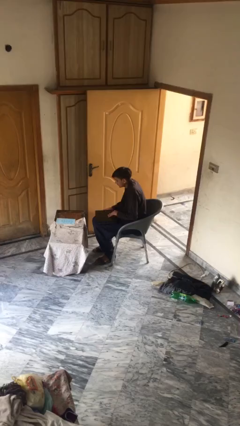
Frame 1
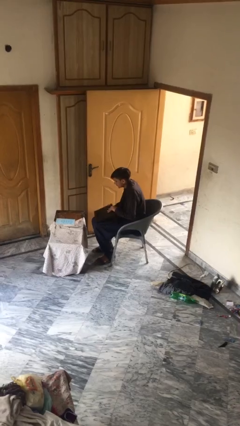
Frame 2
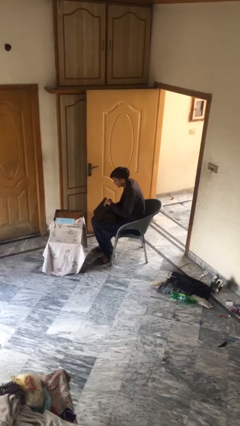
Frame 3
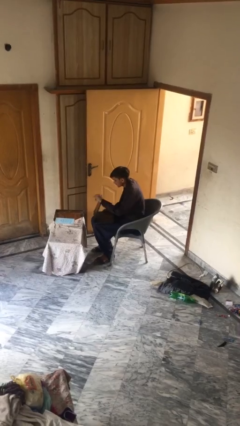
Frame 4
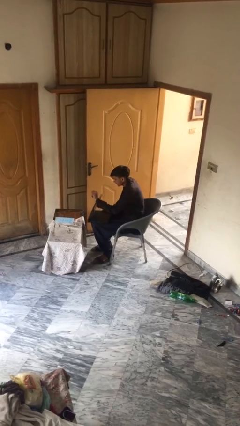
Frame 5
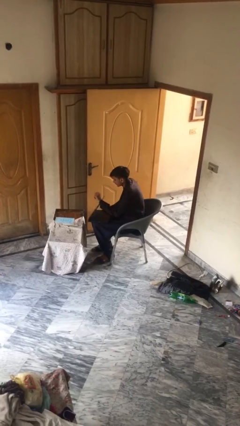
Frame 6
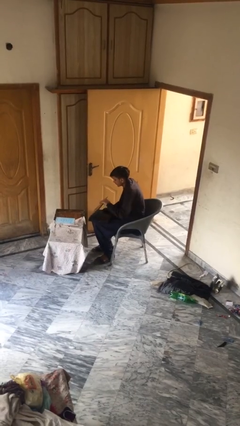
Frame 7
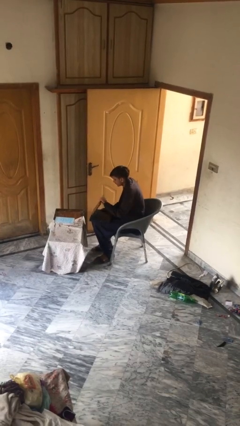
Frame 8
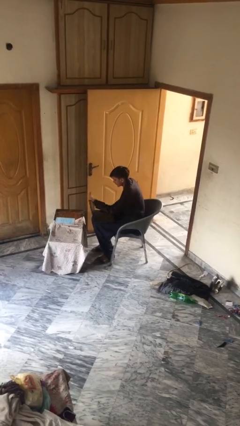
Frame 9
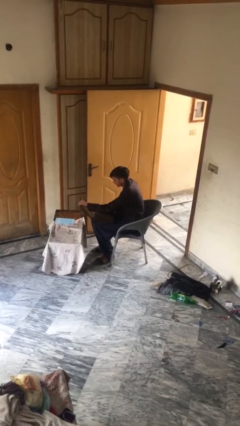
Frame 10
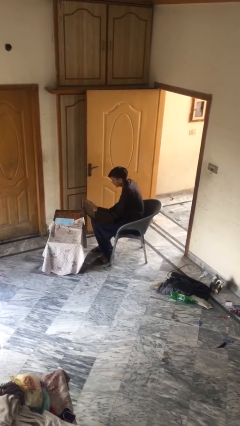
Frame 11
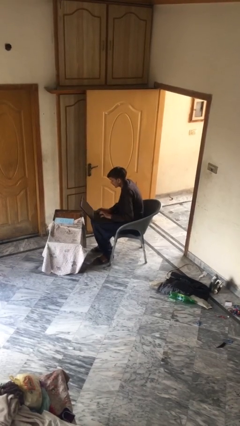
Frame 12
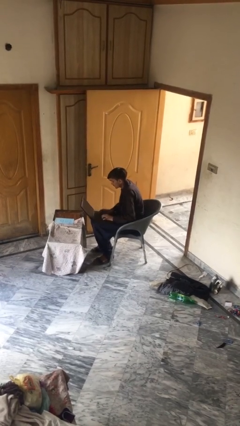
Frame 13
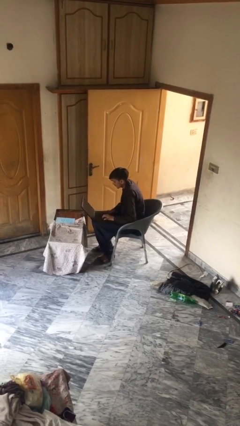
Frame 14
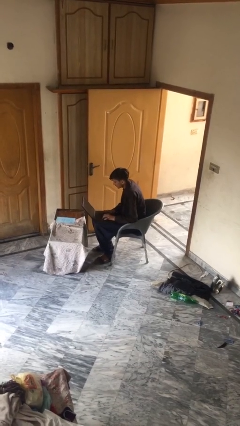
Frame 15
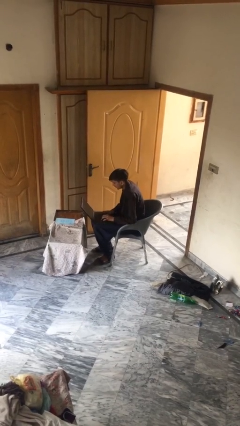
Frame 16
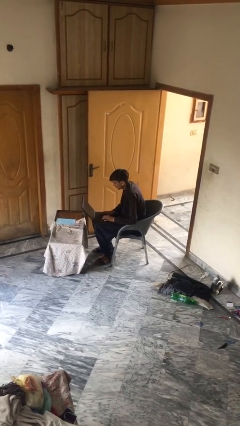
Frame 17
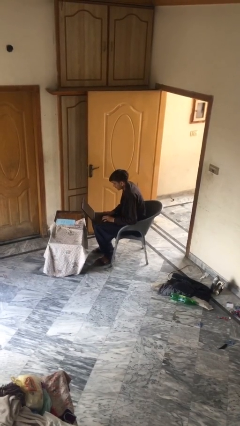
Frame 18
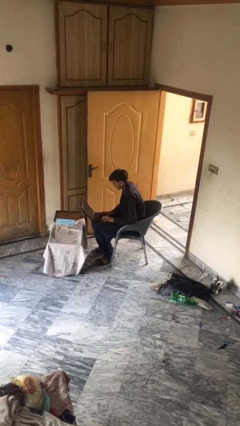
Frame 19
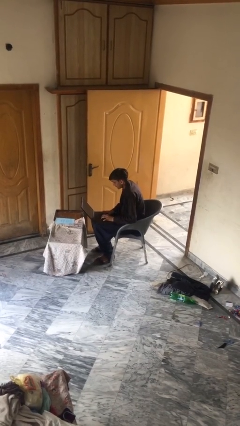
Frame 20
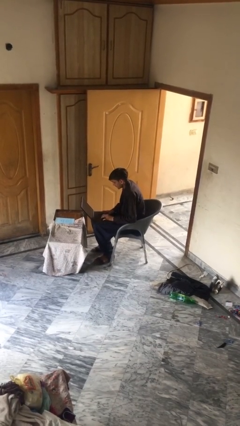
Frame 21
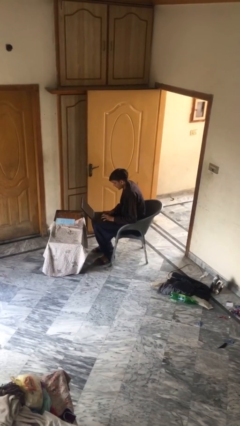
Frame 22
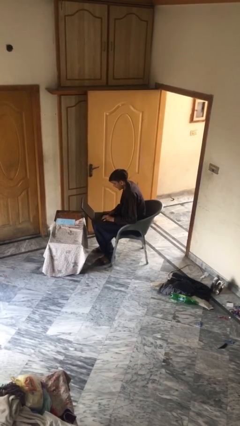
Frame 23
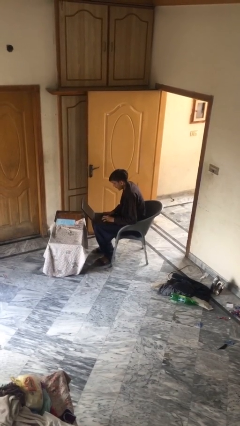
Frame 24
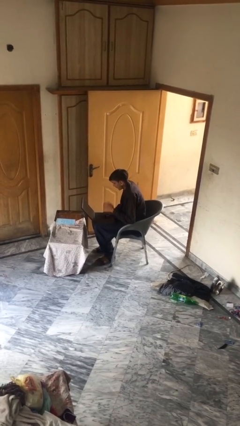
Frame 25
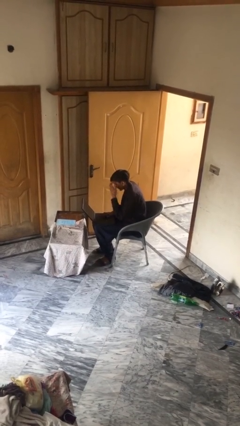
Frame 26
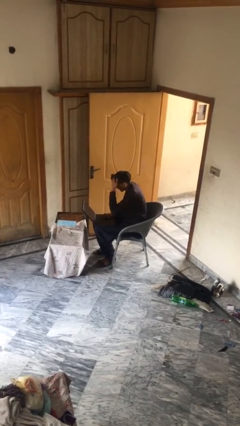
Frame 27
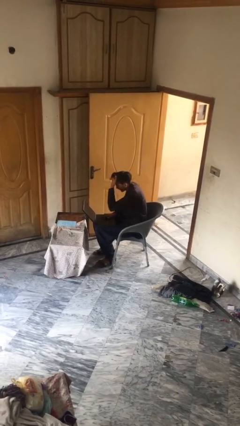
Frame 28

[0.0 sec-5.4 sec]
person interacts with laptop

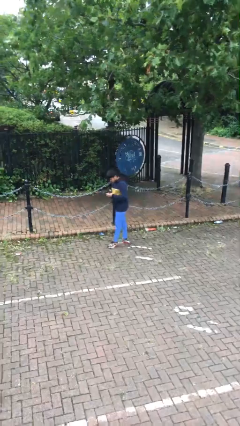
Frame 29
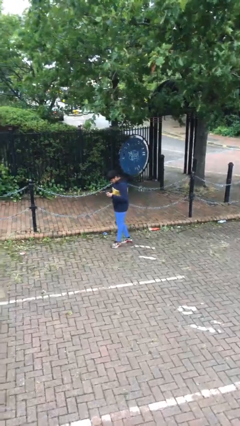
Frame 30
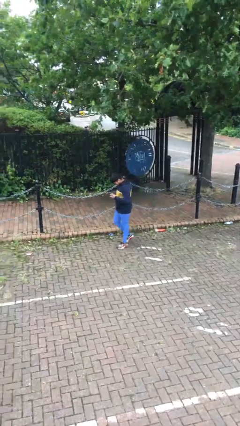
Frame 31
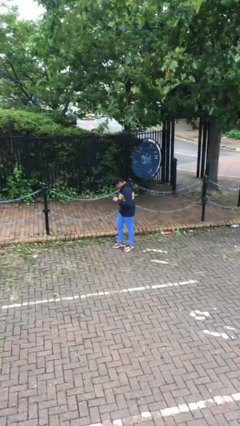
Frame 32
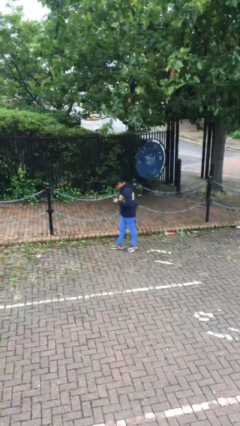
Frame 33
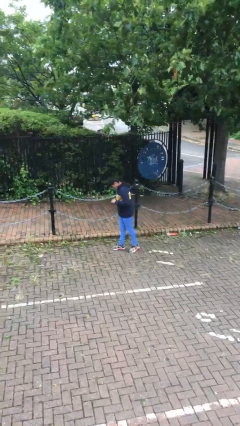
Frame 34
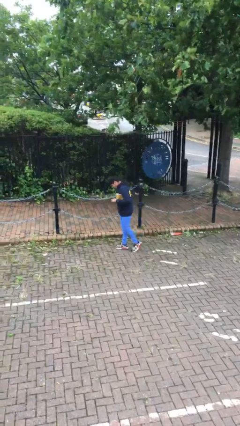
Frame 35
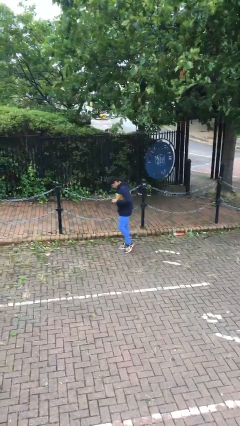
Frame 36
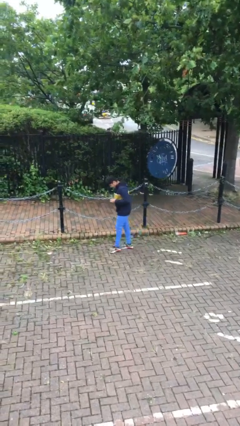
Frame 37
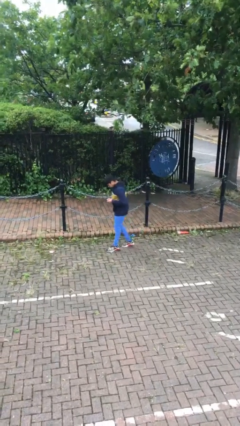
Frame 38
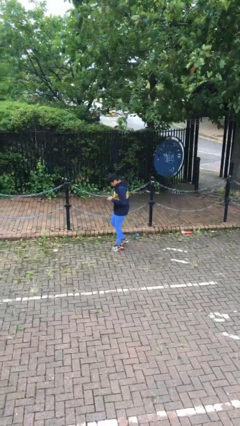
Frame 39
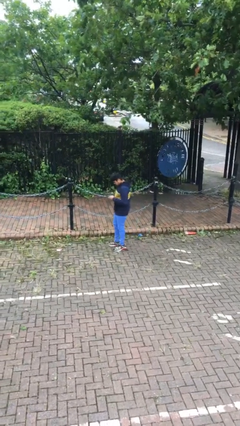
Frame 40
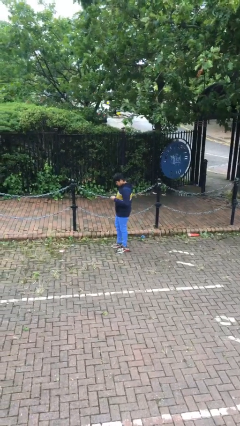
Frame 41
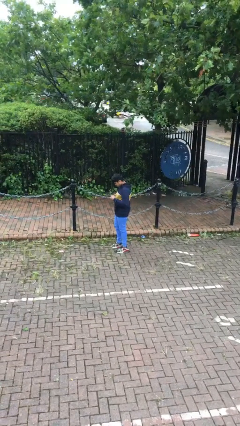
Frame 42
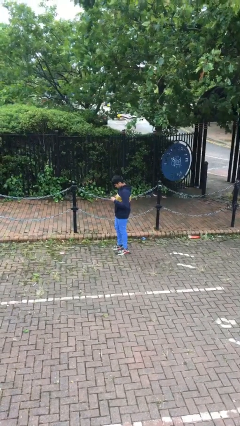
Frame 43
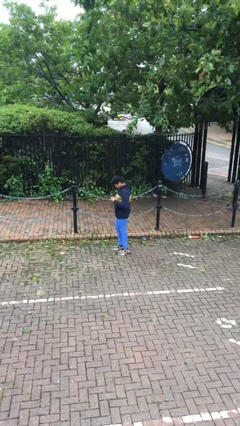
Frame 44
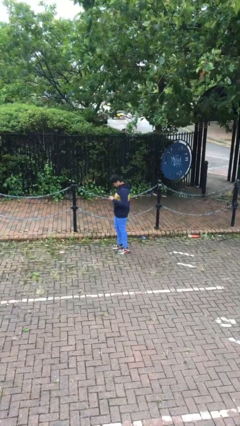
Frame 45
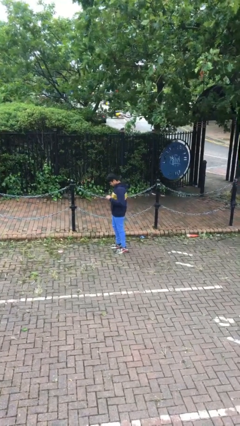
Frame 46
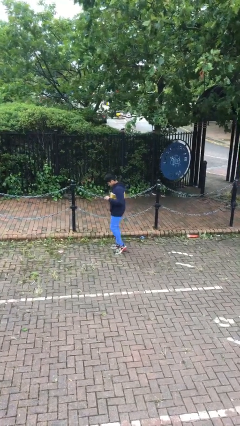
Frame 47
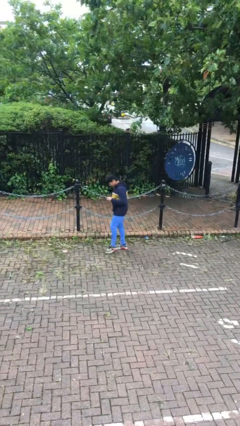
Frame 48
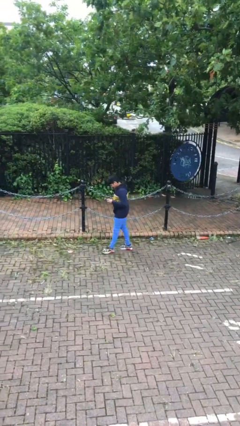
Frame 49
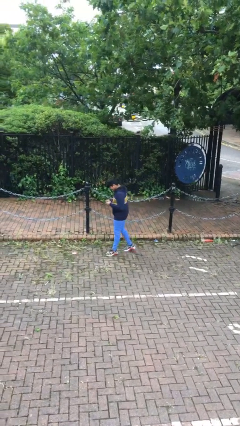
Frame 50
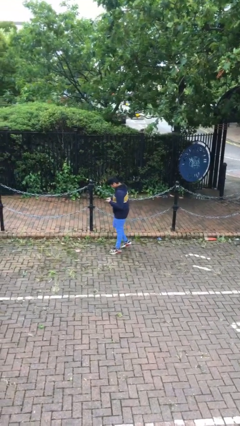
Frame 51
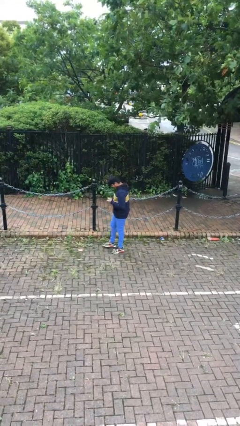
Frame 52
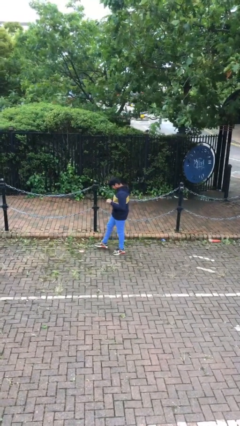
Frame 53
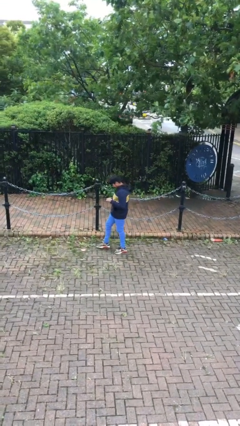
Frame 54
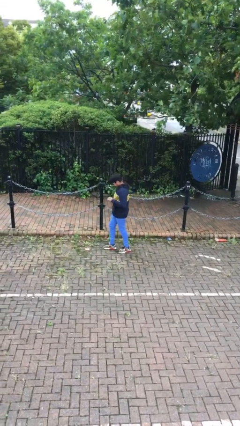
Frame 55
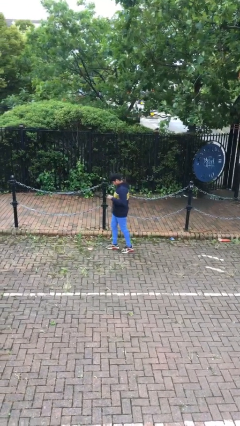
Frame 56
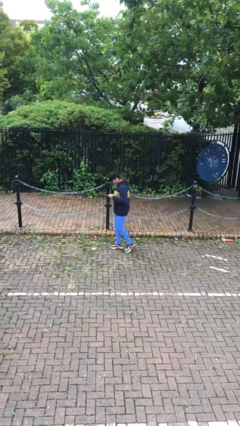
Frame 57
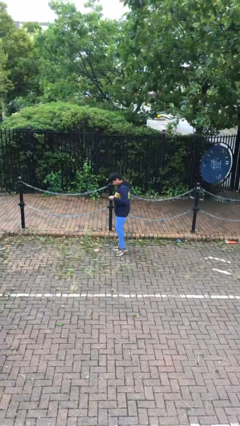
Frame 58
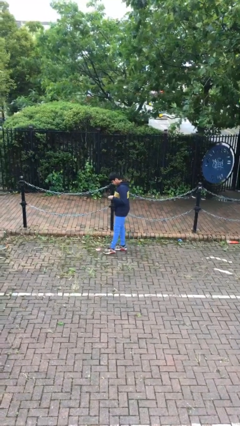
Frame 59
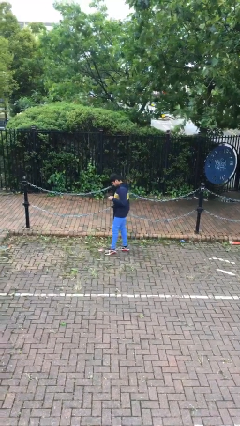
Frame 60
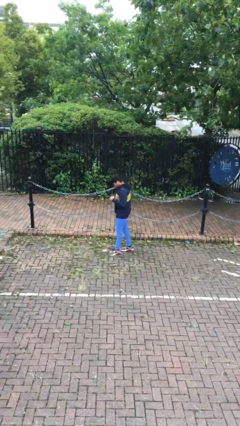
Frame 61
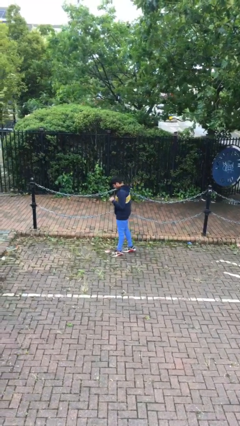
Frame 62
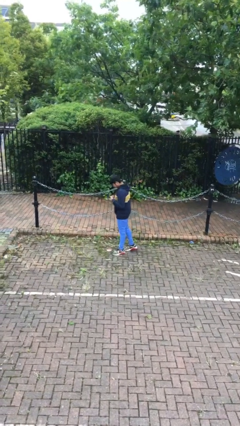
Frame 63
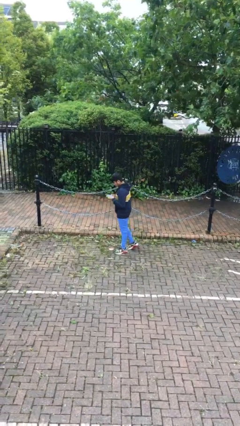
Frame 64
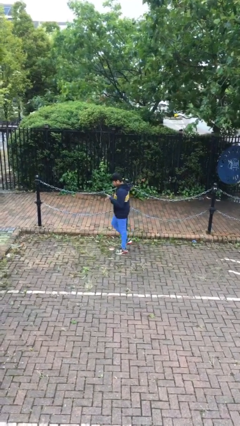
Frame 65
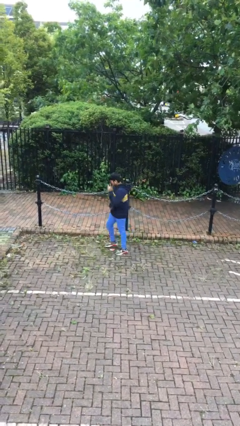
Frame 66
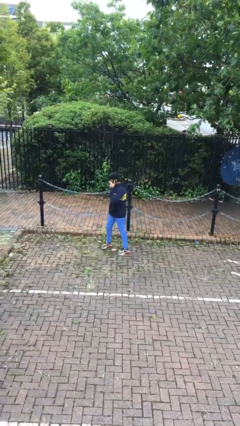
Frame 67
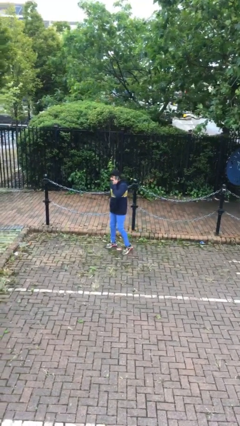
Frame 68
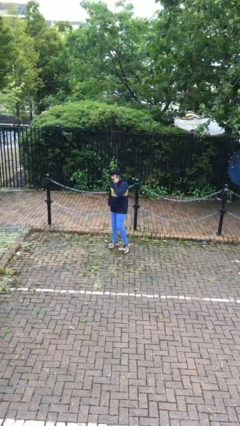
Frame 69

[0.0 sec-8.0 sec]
person texts on phone

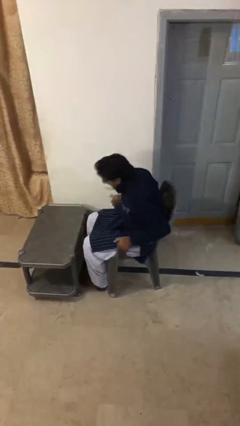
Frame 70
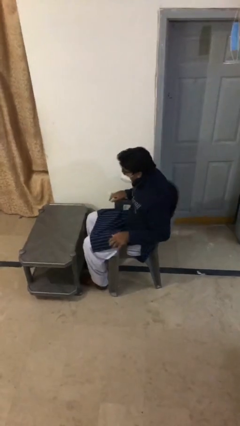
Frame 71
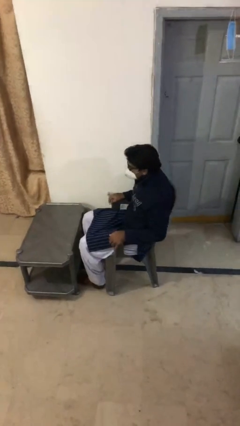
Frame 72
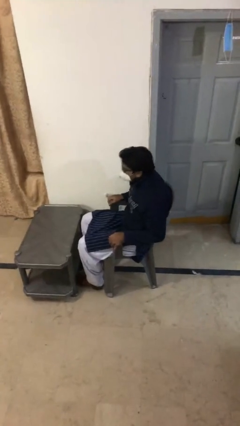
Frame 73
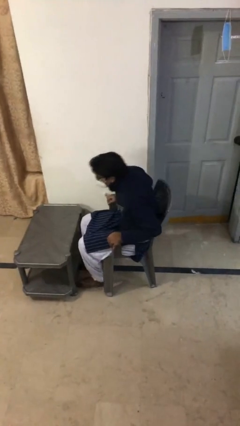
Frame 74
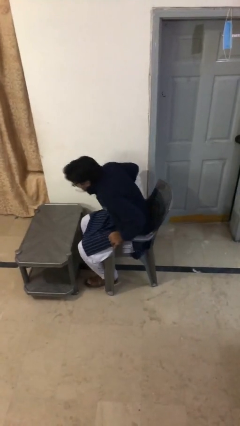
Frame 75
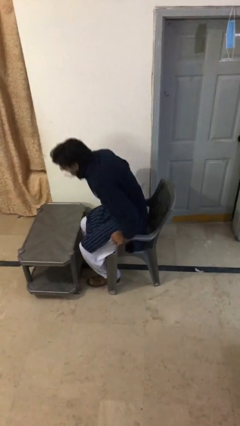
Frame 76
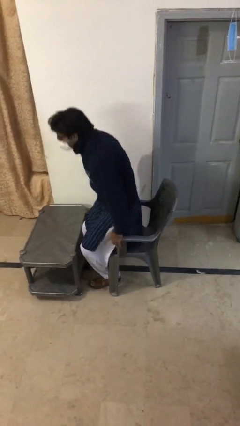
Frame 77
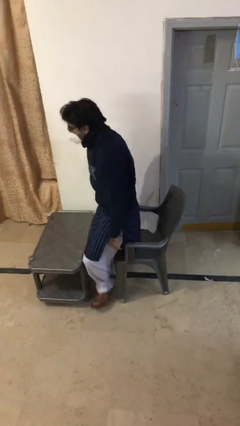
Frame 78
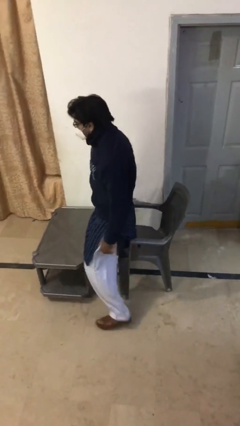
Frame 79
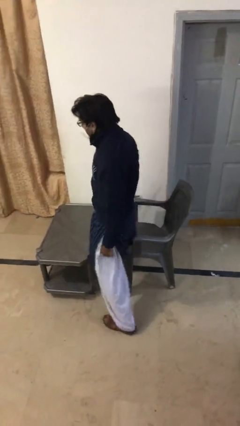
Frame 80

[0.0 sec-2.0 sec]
person stands up

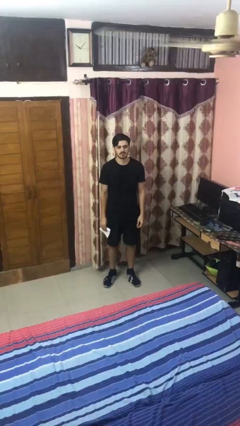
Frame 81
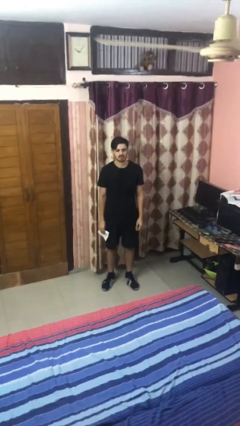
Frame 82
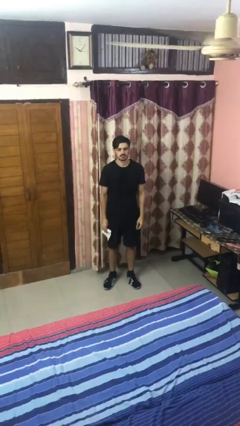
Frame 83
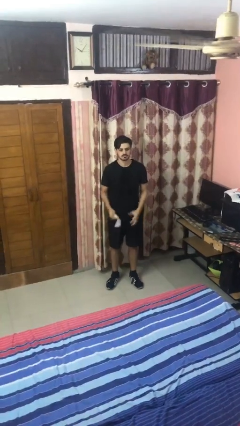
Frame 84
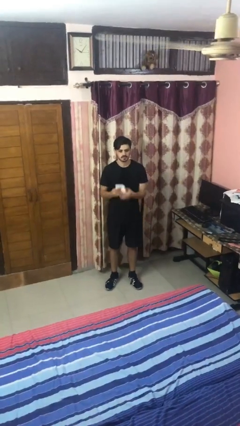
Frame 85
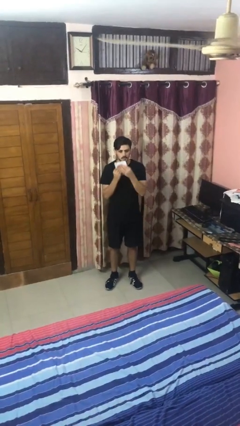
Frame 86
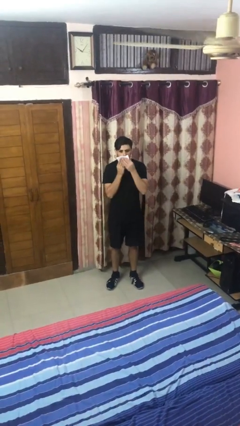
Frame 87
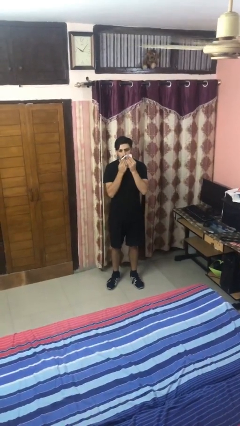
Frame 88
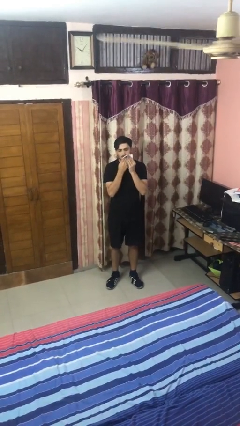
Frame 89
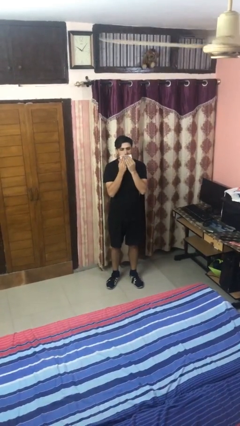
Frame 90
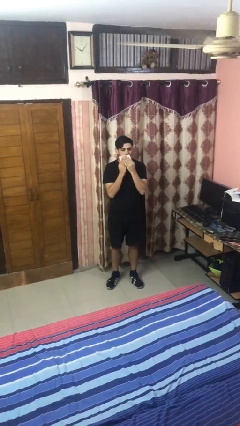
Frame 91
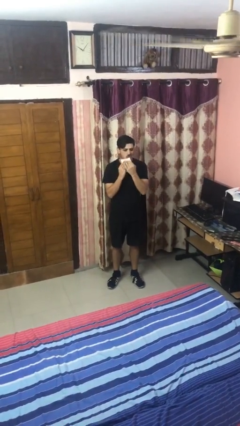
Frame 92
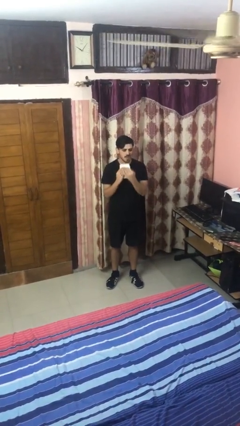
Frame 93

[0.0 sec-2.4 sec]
person wipes mouth with napkin
